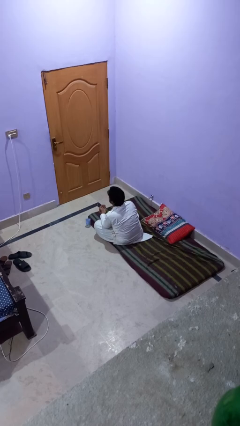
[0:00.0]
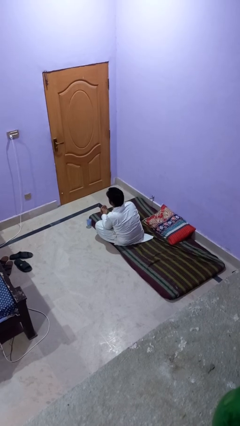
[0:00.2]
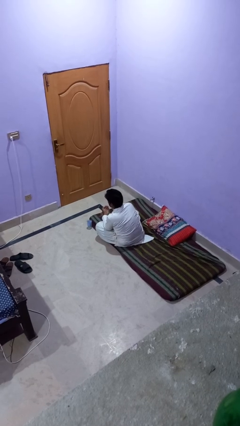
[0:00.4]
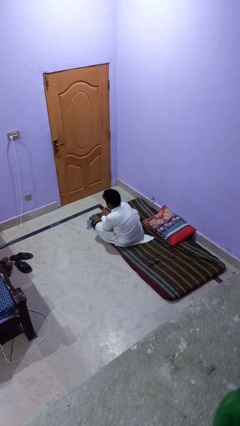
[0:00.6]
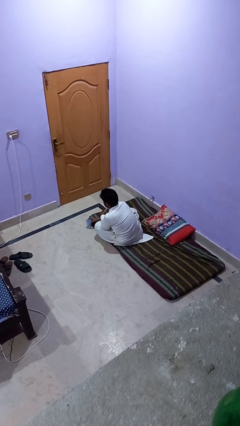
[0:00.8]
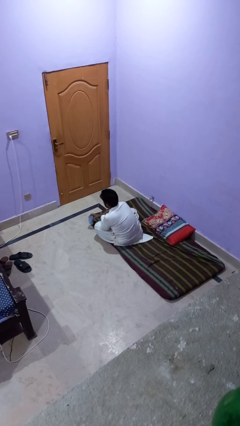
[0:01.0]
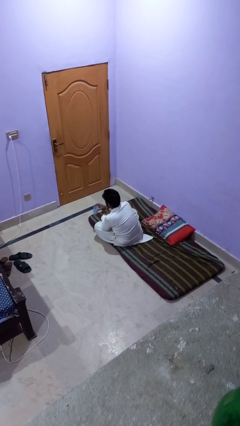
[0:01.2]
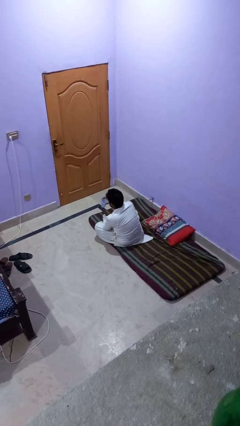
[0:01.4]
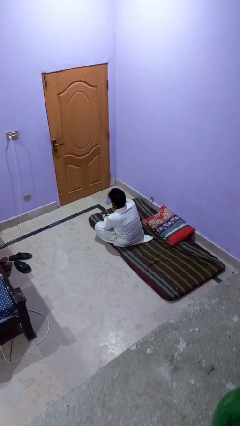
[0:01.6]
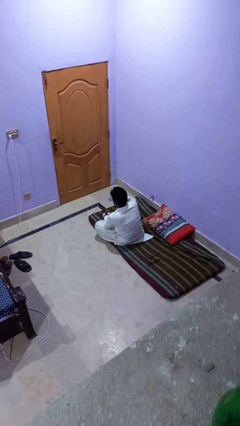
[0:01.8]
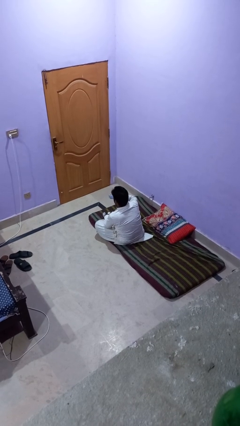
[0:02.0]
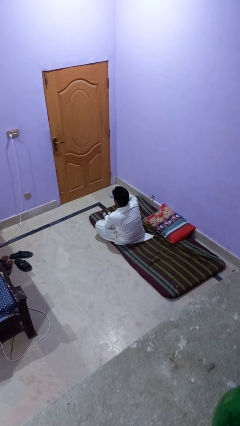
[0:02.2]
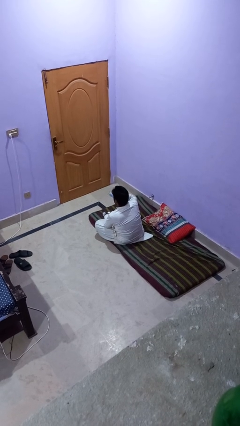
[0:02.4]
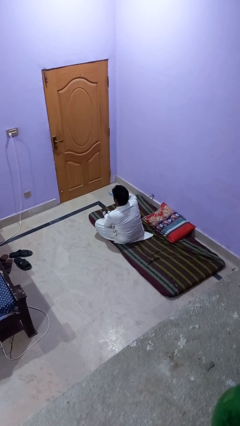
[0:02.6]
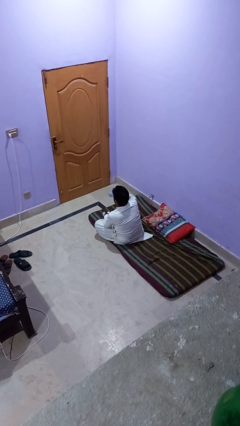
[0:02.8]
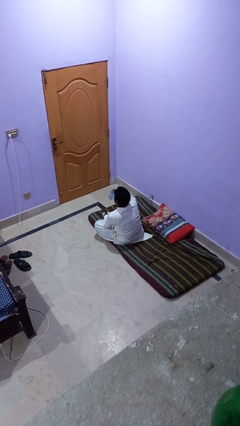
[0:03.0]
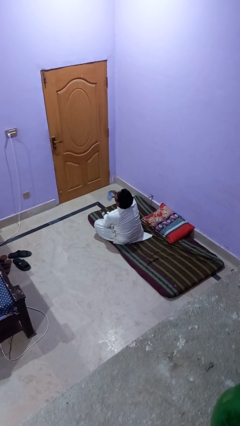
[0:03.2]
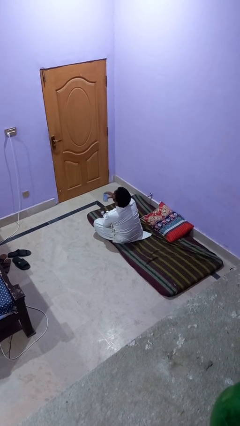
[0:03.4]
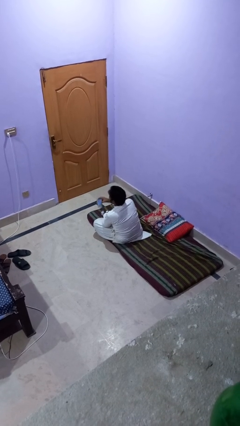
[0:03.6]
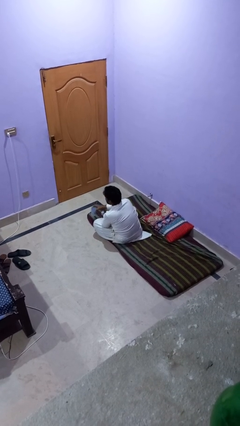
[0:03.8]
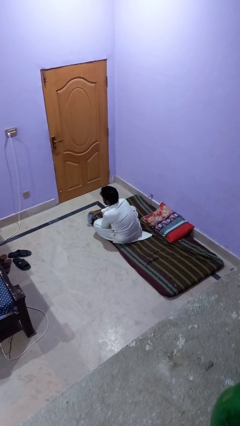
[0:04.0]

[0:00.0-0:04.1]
person drinks from cup

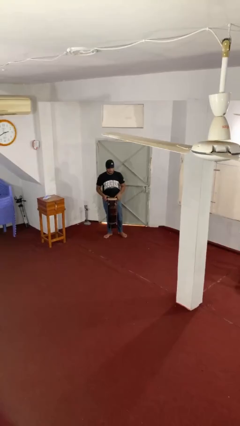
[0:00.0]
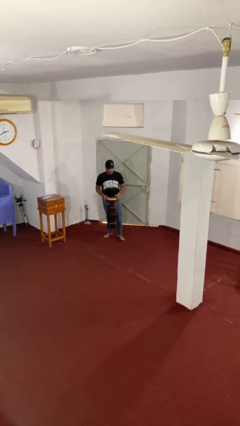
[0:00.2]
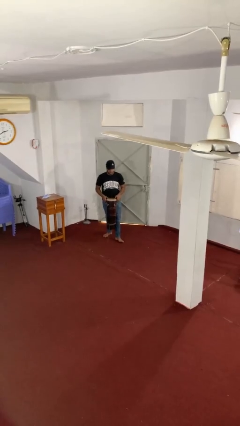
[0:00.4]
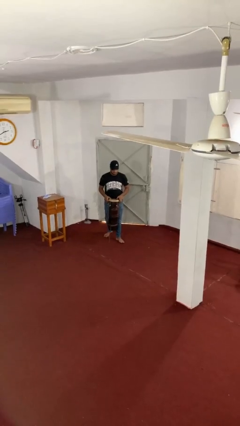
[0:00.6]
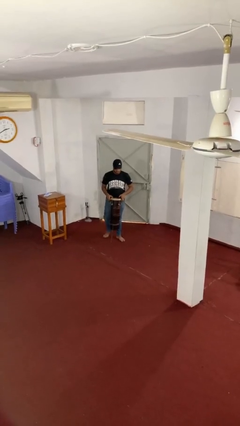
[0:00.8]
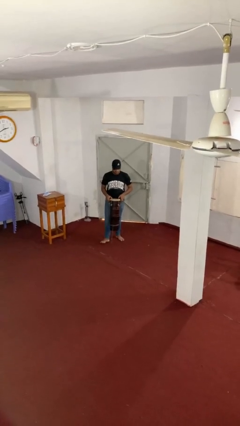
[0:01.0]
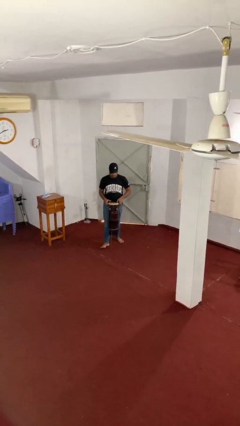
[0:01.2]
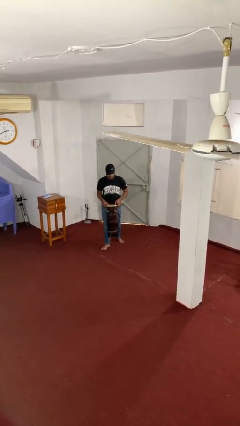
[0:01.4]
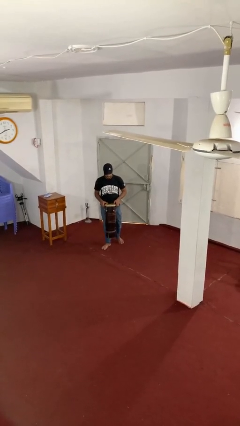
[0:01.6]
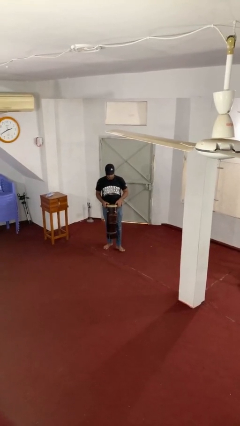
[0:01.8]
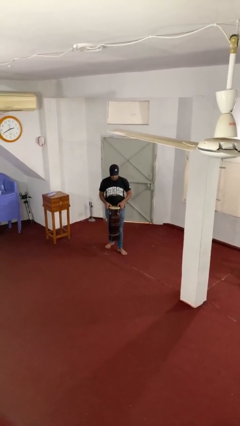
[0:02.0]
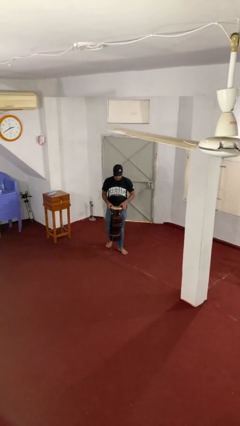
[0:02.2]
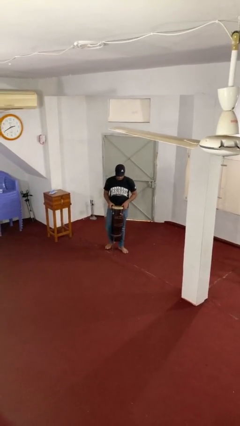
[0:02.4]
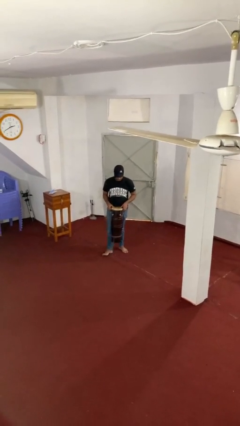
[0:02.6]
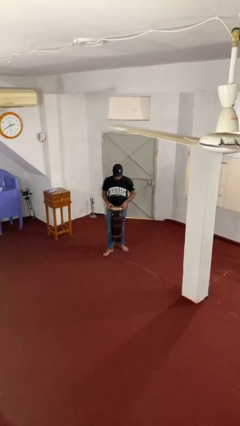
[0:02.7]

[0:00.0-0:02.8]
person carries heavy object

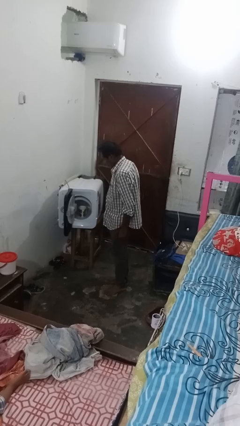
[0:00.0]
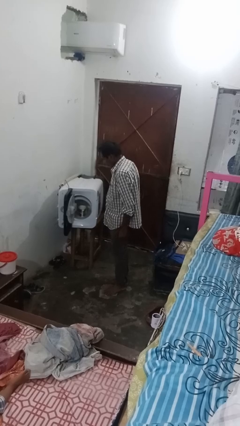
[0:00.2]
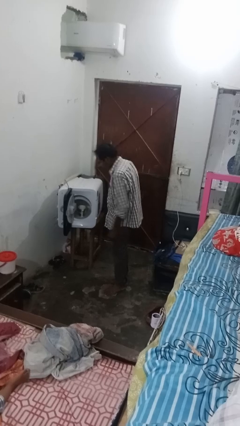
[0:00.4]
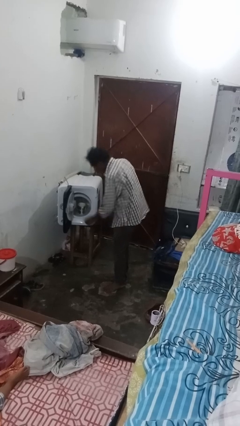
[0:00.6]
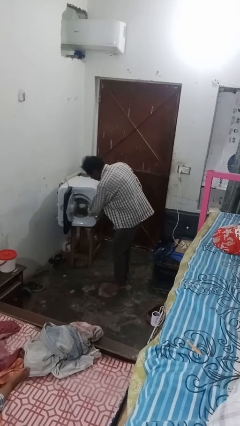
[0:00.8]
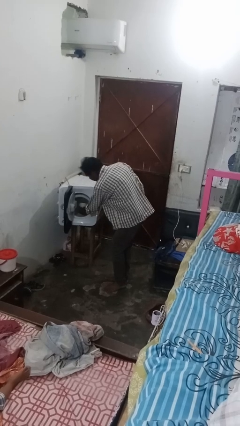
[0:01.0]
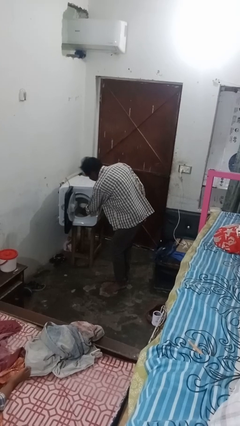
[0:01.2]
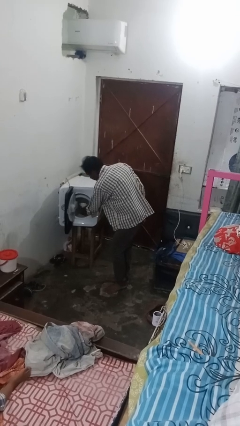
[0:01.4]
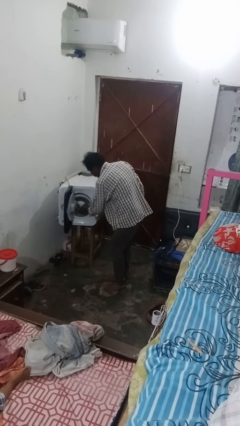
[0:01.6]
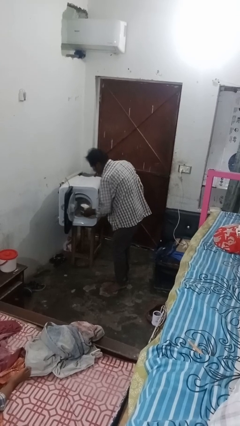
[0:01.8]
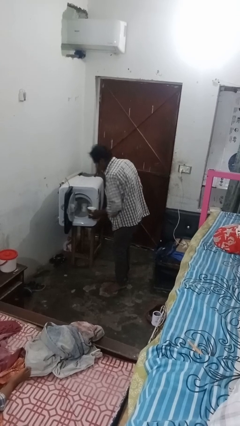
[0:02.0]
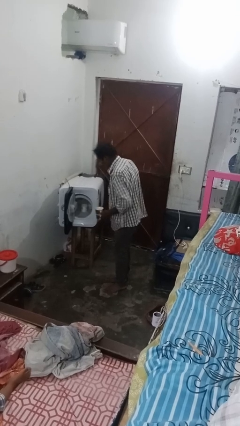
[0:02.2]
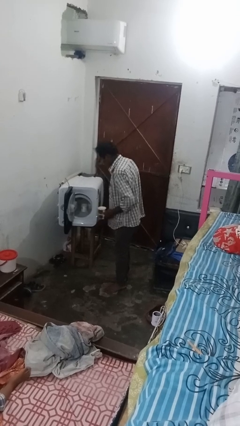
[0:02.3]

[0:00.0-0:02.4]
person unloads dishwasher

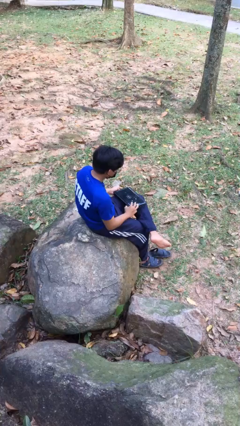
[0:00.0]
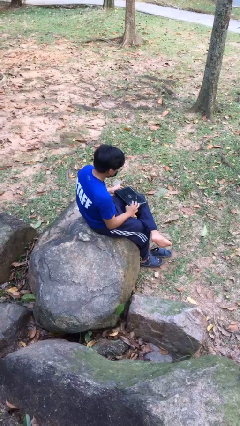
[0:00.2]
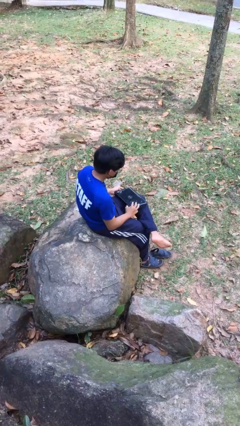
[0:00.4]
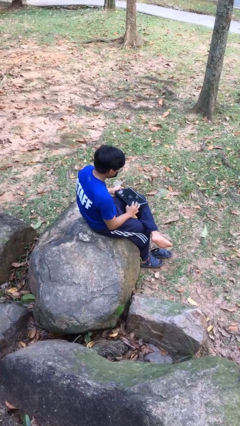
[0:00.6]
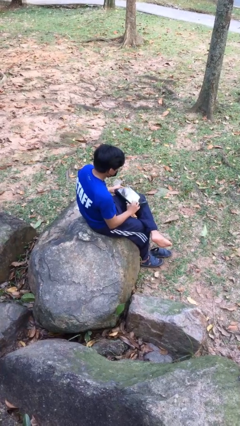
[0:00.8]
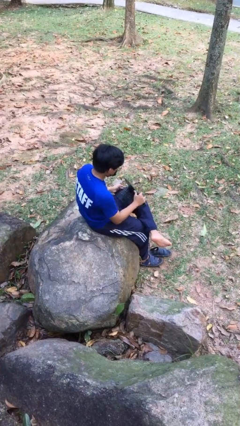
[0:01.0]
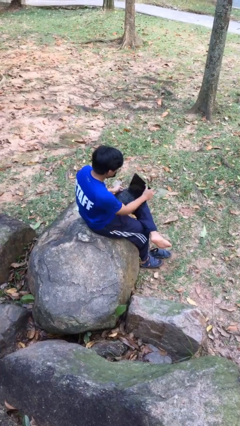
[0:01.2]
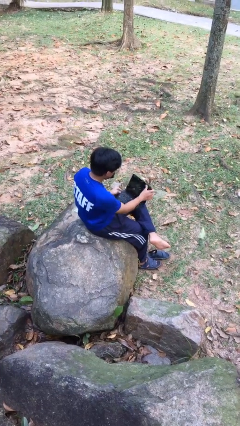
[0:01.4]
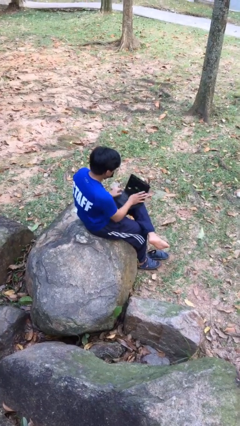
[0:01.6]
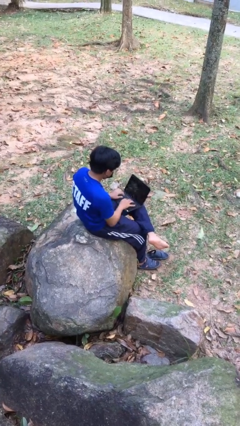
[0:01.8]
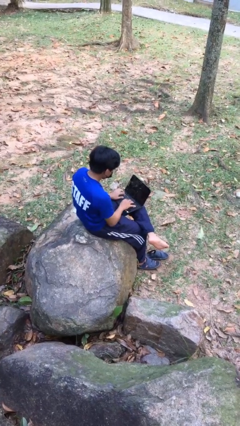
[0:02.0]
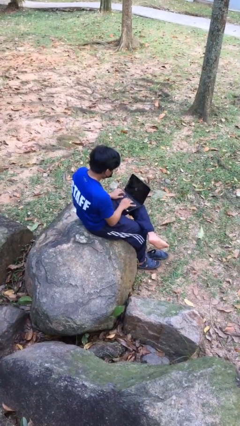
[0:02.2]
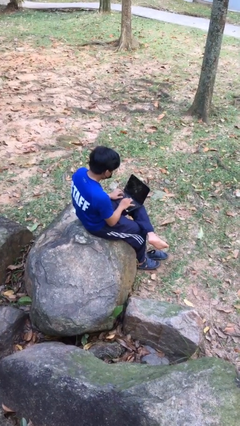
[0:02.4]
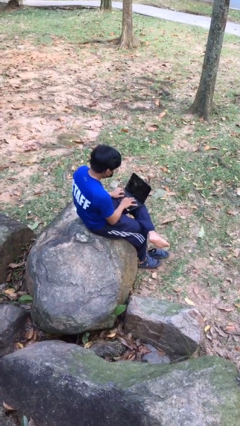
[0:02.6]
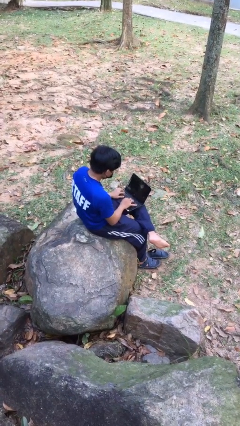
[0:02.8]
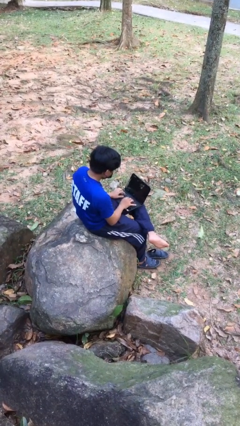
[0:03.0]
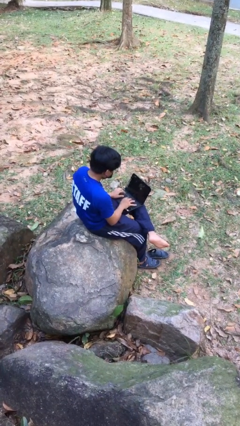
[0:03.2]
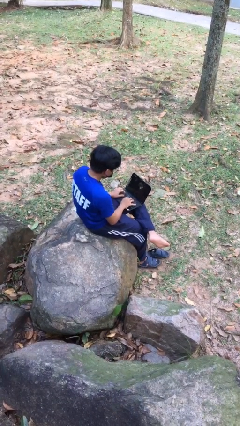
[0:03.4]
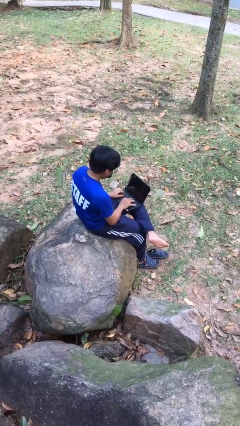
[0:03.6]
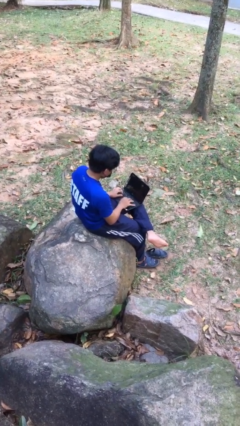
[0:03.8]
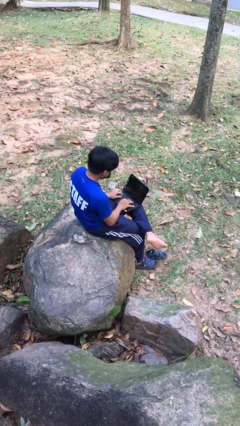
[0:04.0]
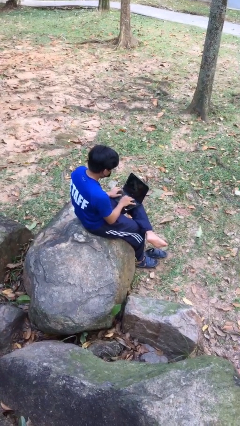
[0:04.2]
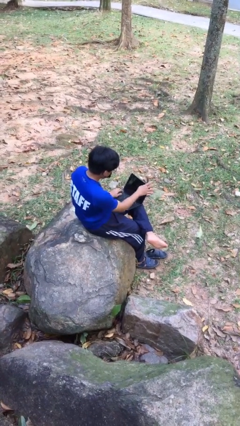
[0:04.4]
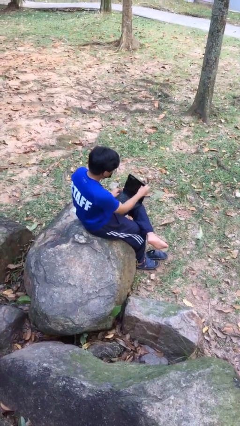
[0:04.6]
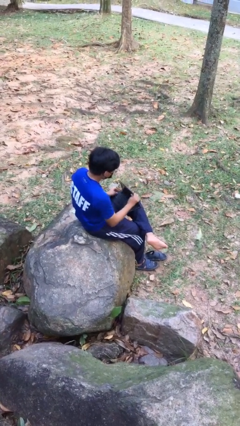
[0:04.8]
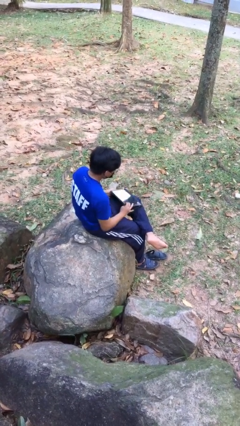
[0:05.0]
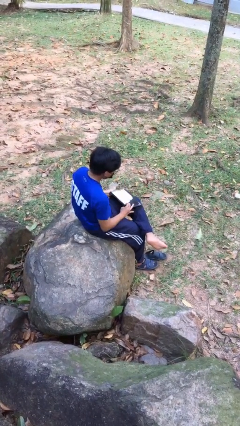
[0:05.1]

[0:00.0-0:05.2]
person interacts with laptop

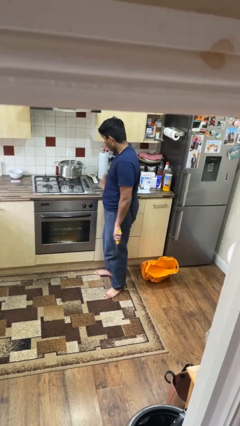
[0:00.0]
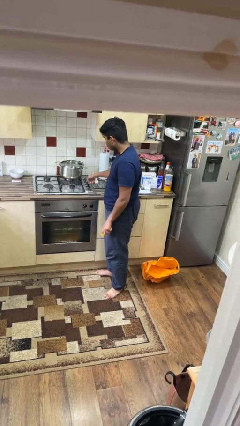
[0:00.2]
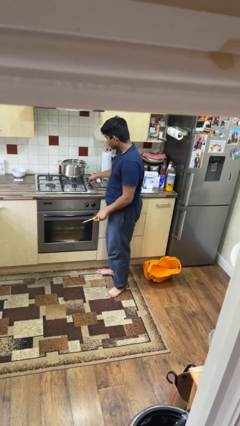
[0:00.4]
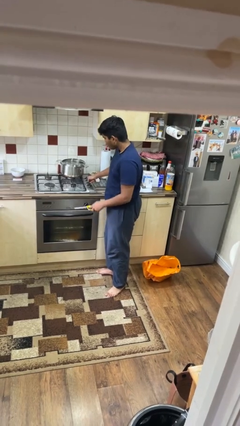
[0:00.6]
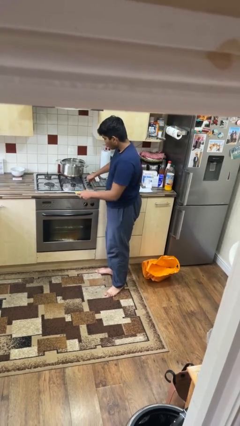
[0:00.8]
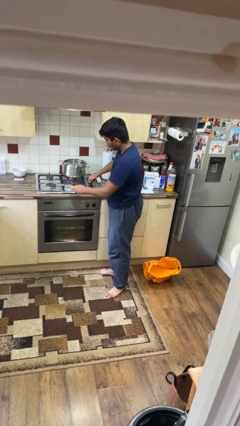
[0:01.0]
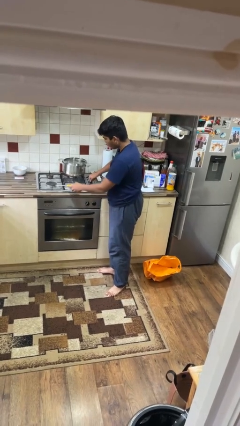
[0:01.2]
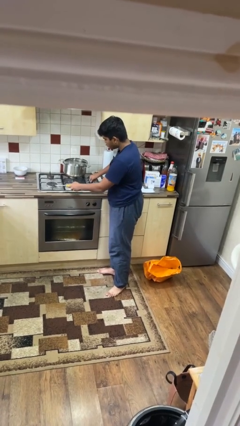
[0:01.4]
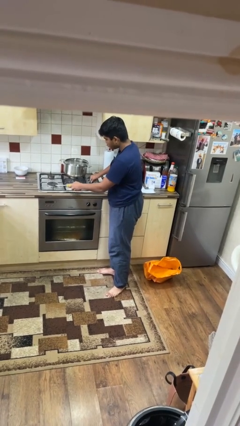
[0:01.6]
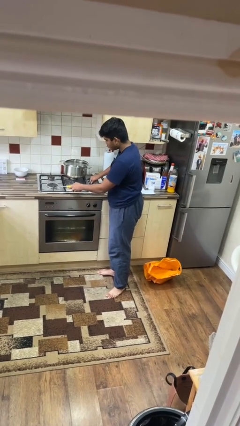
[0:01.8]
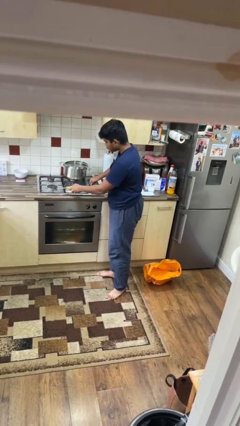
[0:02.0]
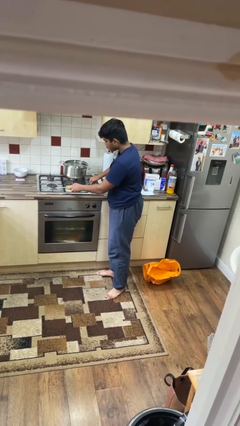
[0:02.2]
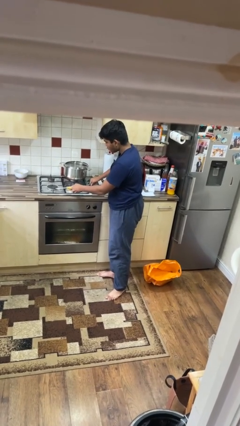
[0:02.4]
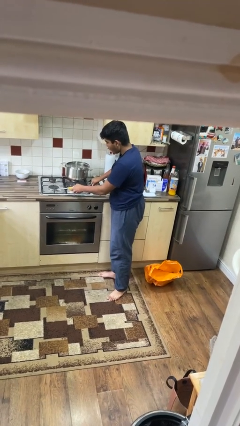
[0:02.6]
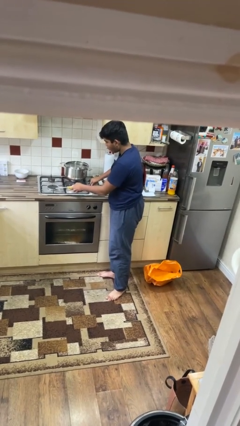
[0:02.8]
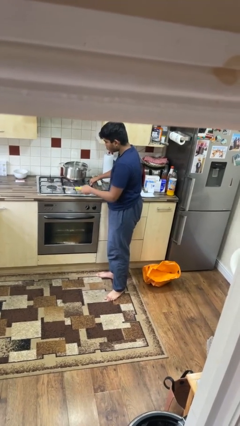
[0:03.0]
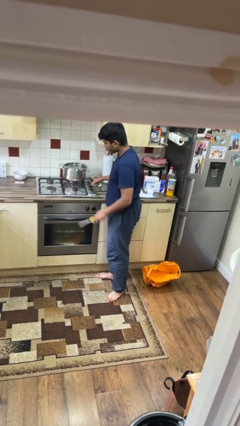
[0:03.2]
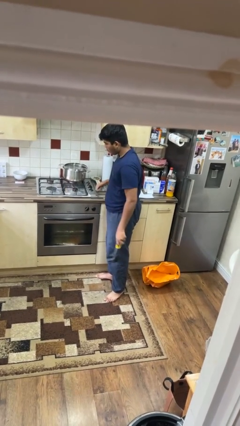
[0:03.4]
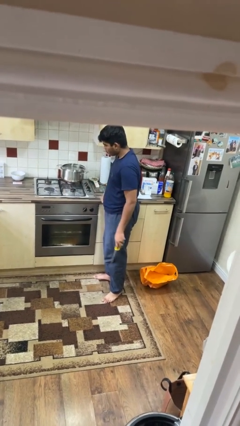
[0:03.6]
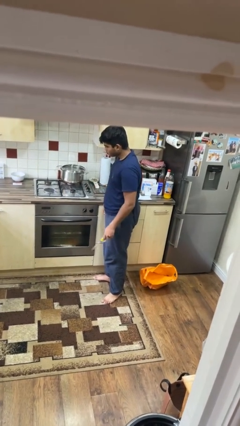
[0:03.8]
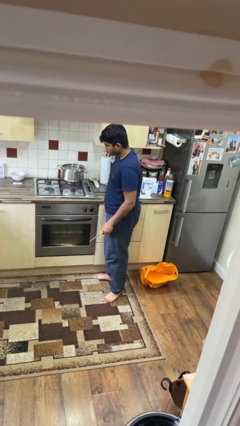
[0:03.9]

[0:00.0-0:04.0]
person turns on stovetop
